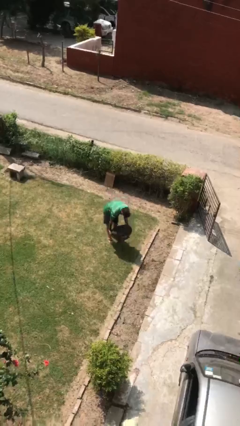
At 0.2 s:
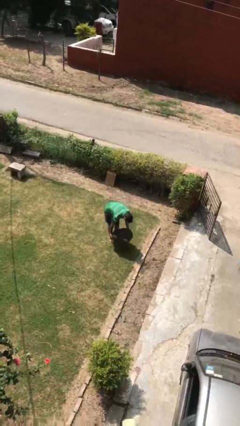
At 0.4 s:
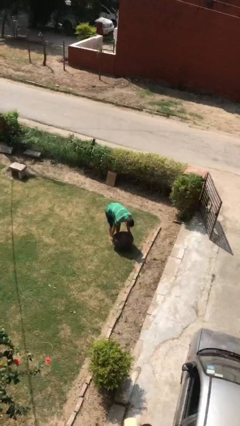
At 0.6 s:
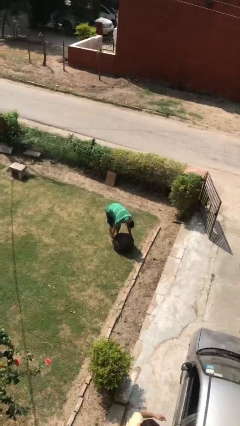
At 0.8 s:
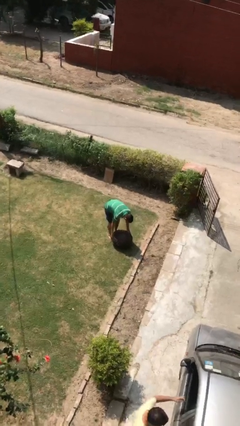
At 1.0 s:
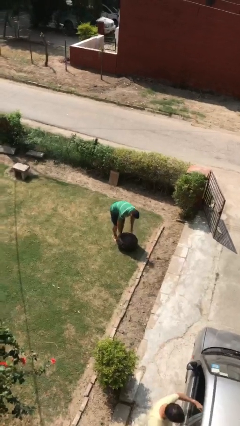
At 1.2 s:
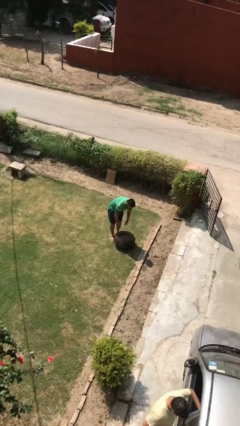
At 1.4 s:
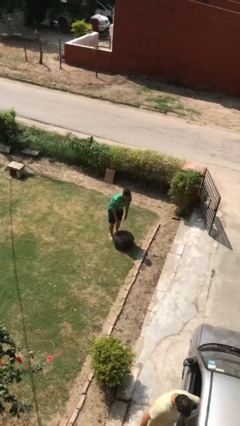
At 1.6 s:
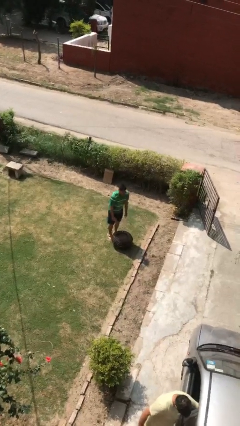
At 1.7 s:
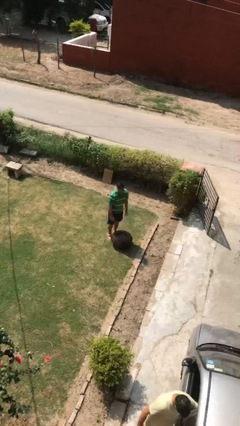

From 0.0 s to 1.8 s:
person puts down object on floor

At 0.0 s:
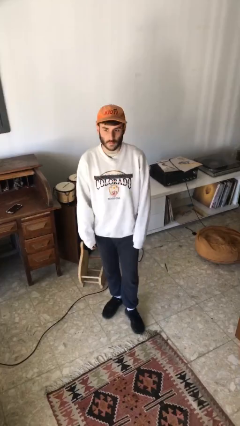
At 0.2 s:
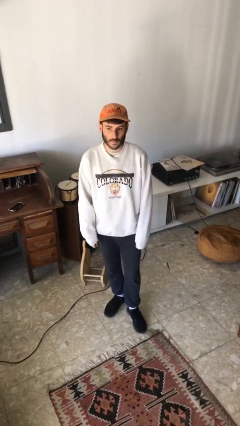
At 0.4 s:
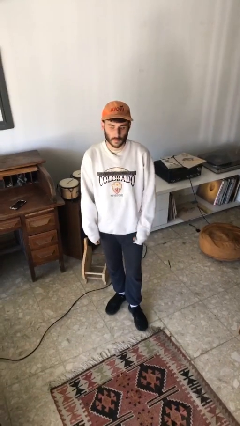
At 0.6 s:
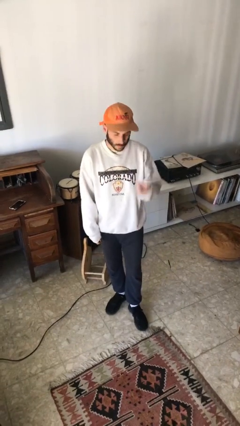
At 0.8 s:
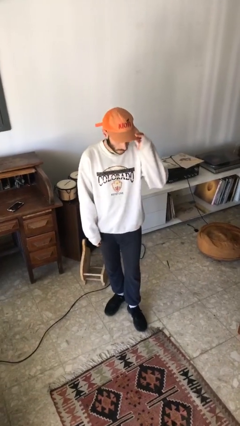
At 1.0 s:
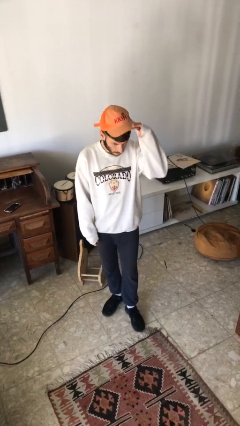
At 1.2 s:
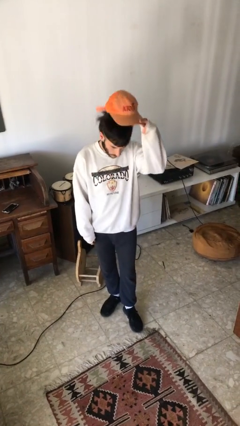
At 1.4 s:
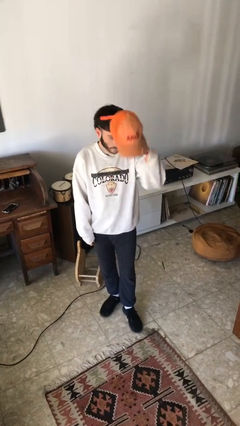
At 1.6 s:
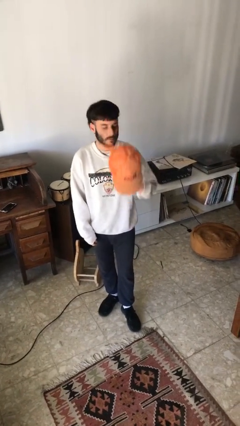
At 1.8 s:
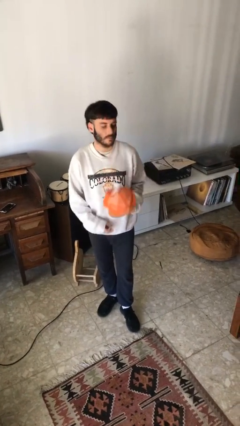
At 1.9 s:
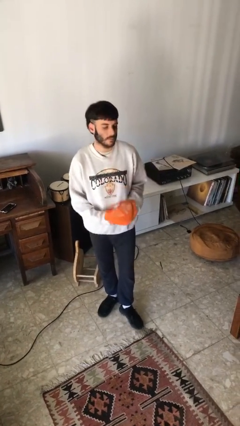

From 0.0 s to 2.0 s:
person takes off hat

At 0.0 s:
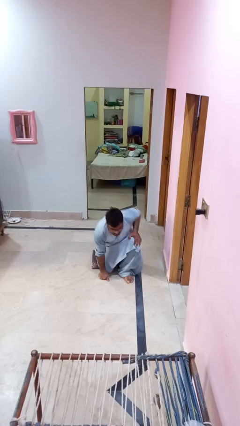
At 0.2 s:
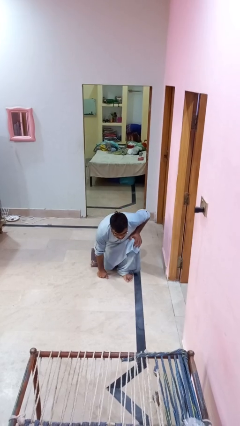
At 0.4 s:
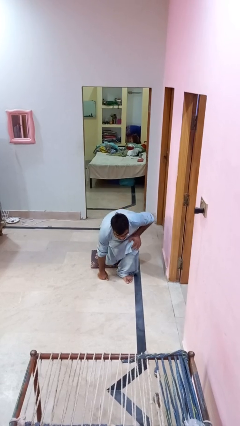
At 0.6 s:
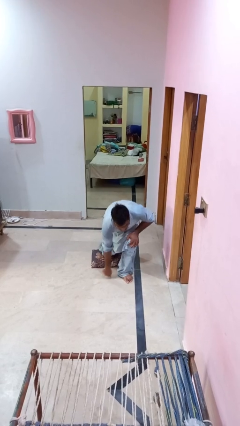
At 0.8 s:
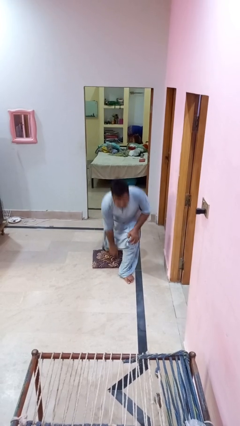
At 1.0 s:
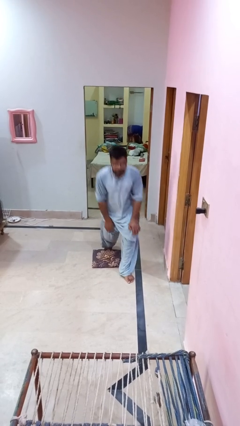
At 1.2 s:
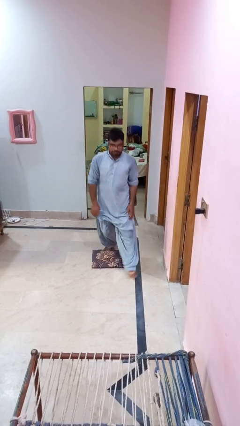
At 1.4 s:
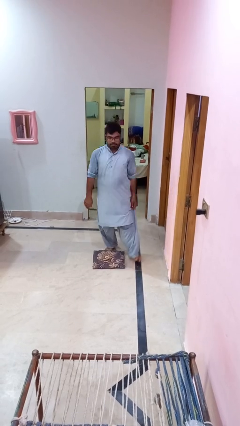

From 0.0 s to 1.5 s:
person stands up from floor

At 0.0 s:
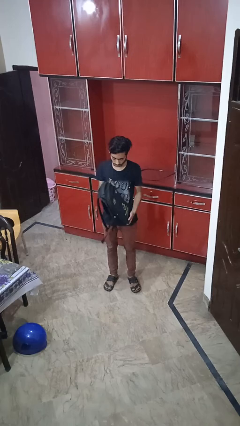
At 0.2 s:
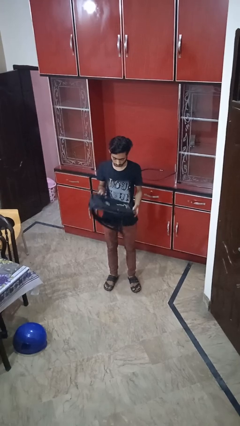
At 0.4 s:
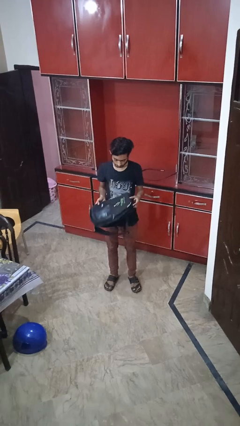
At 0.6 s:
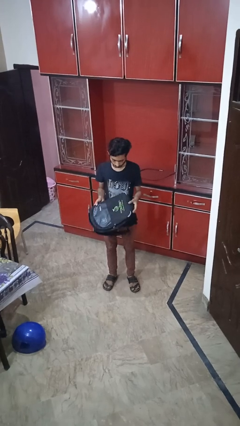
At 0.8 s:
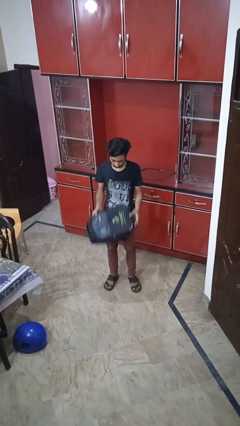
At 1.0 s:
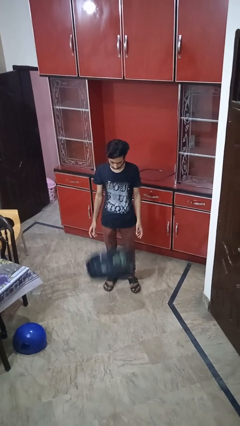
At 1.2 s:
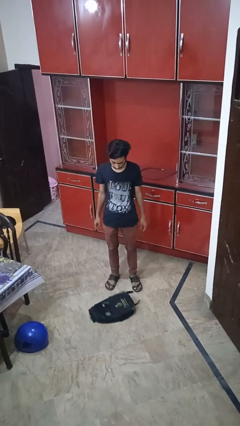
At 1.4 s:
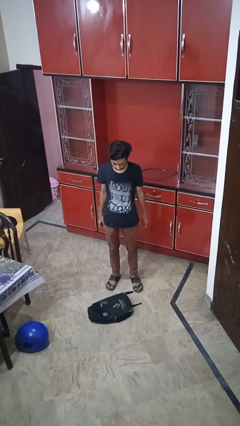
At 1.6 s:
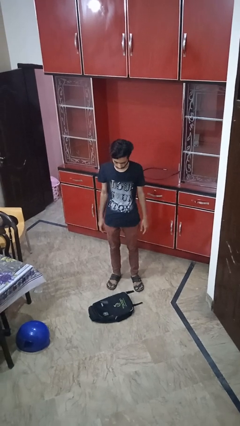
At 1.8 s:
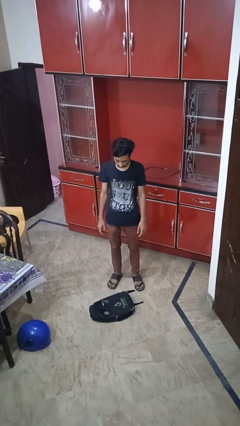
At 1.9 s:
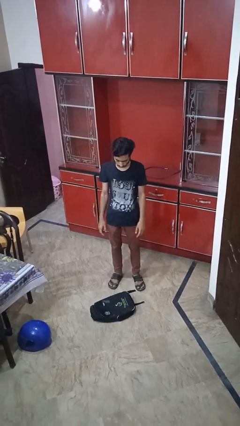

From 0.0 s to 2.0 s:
person drops object

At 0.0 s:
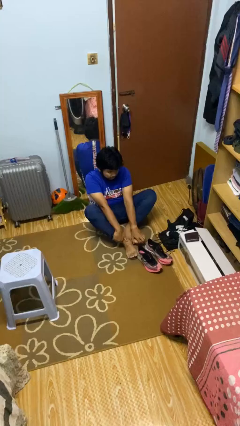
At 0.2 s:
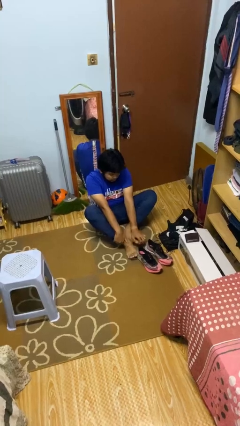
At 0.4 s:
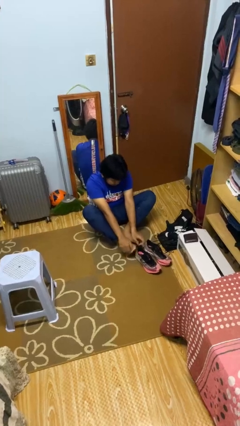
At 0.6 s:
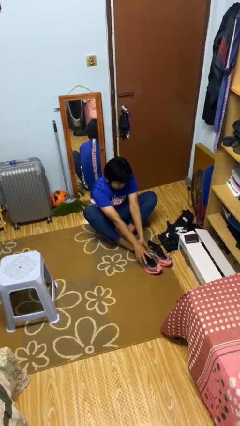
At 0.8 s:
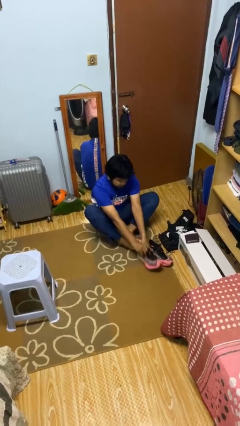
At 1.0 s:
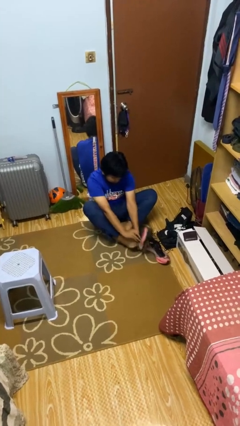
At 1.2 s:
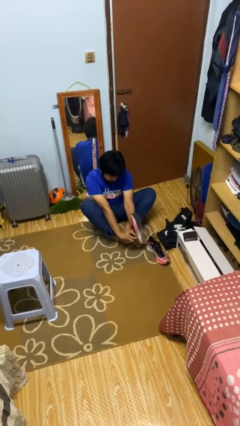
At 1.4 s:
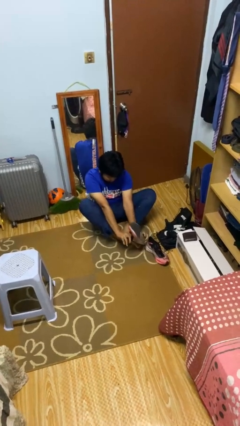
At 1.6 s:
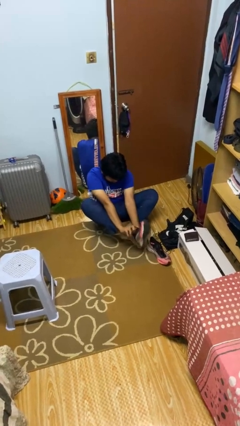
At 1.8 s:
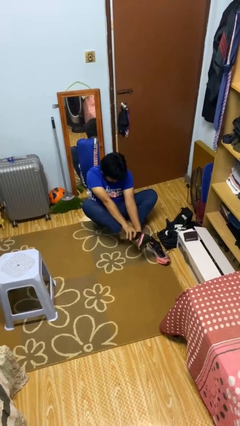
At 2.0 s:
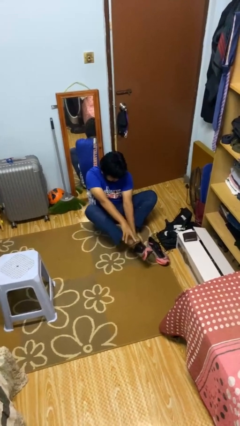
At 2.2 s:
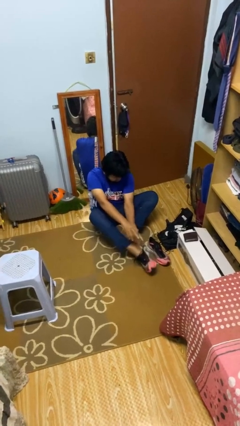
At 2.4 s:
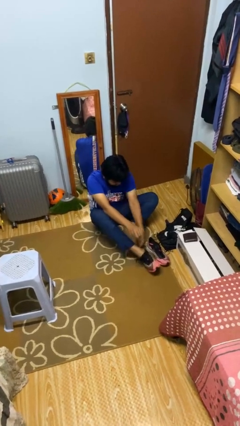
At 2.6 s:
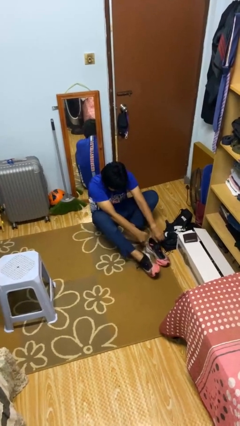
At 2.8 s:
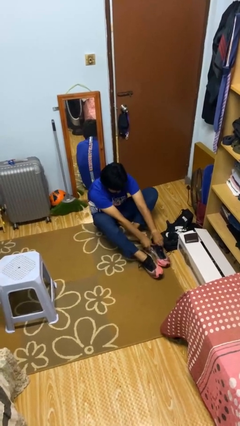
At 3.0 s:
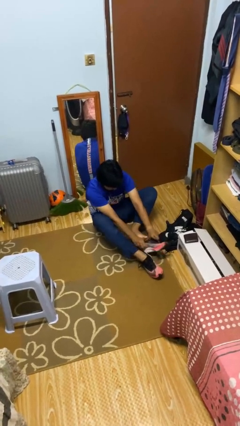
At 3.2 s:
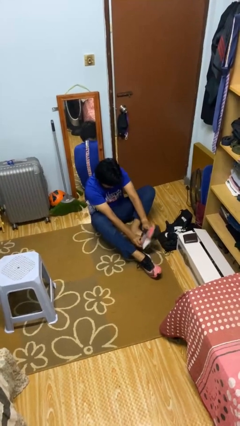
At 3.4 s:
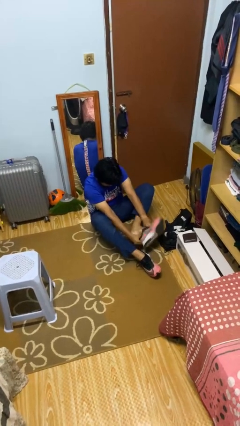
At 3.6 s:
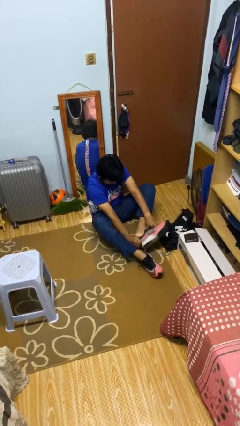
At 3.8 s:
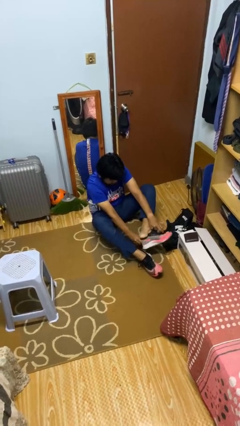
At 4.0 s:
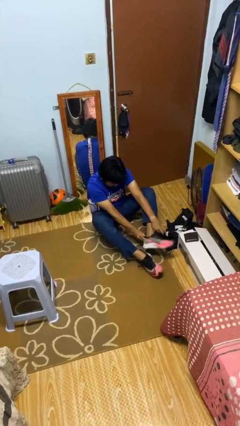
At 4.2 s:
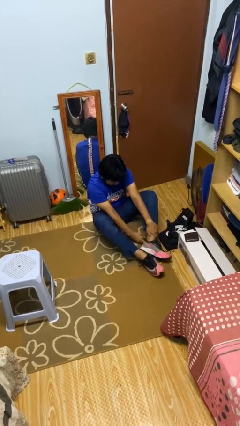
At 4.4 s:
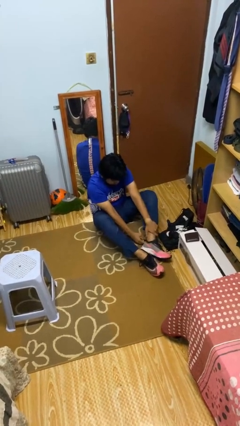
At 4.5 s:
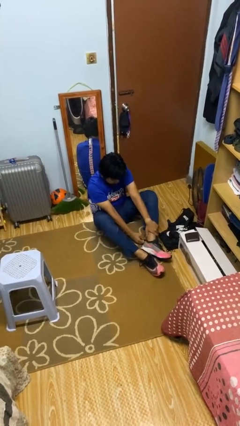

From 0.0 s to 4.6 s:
person puts on shoes

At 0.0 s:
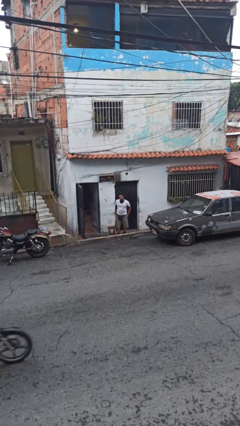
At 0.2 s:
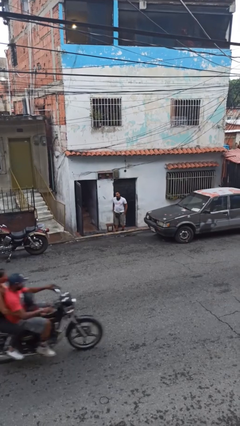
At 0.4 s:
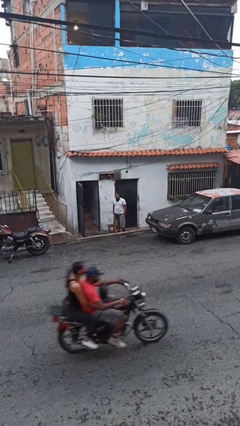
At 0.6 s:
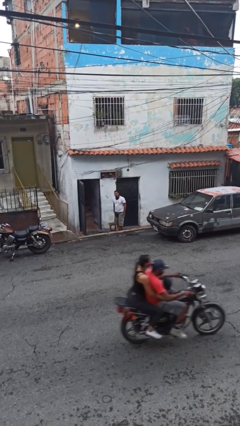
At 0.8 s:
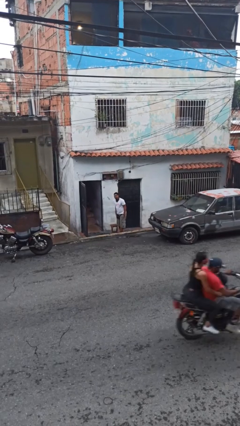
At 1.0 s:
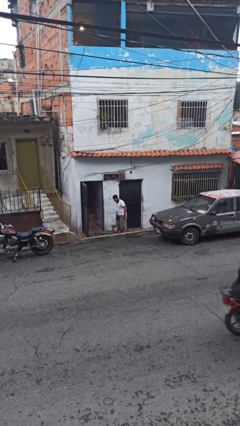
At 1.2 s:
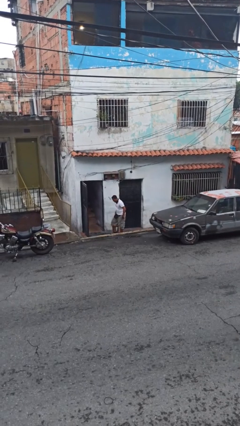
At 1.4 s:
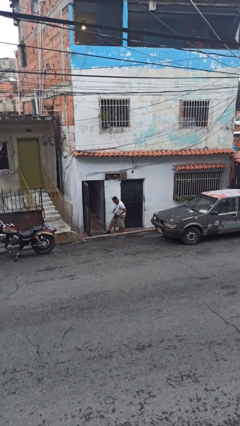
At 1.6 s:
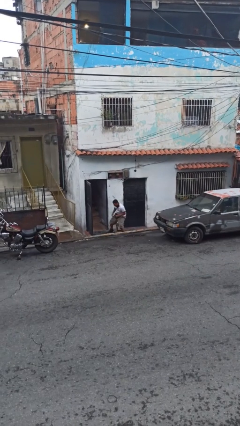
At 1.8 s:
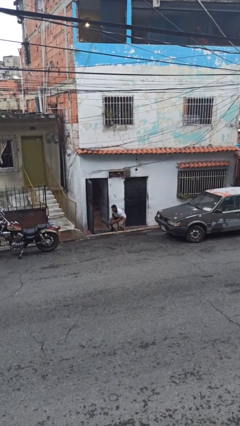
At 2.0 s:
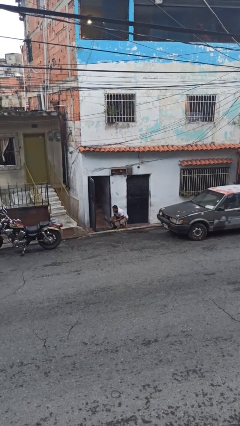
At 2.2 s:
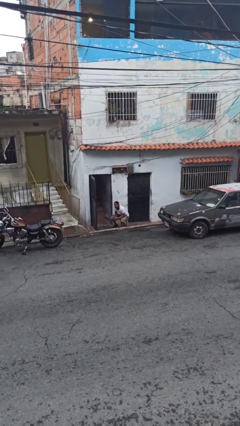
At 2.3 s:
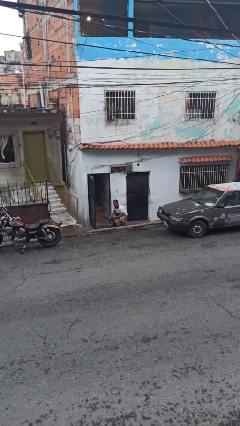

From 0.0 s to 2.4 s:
person sits down

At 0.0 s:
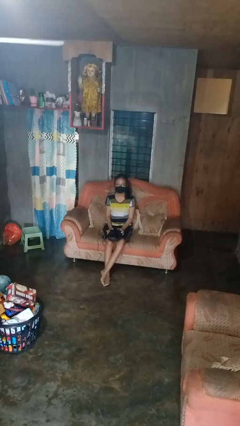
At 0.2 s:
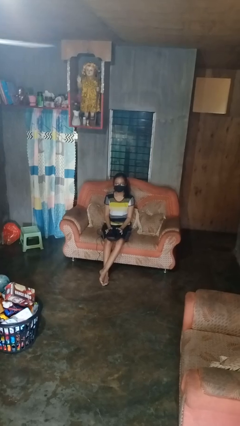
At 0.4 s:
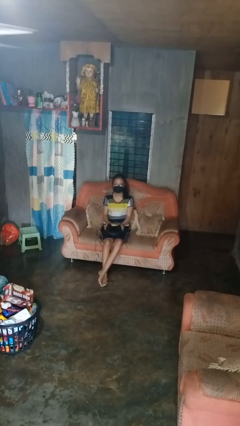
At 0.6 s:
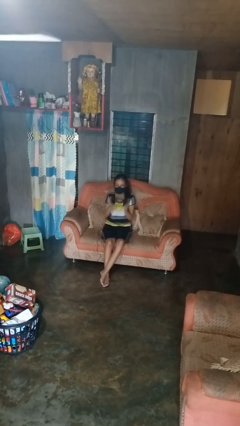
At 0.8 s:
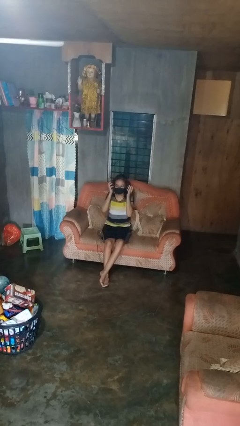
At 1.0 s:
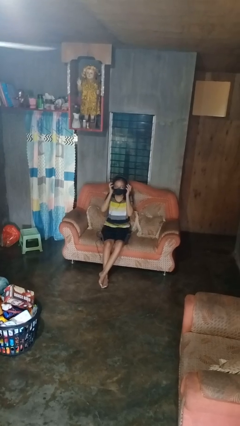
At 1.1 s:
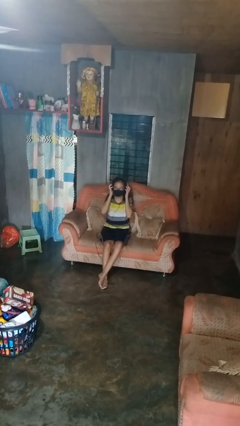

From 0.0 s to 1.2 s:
person puts on headphones

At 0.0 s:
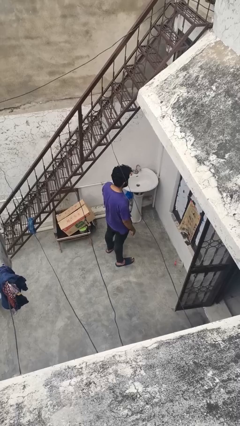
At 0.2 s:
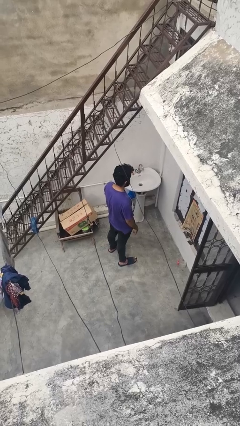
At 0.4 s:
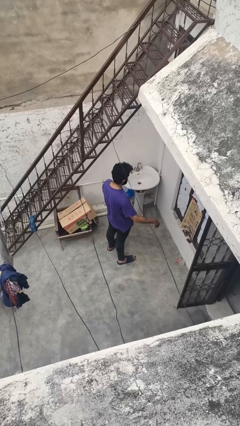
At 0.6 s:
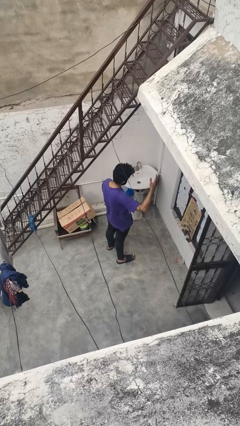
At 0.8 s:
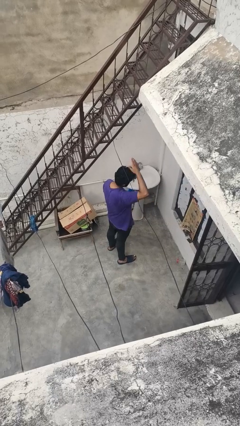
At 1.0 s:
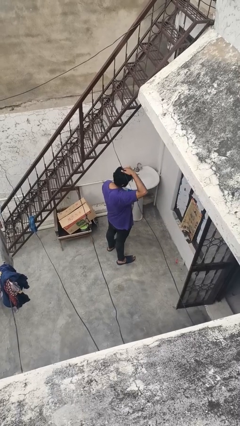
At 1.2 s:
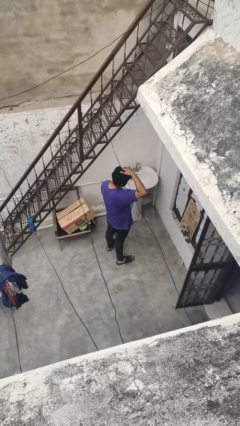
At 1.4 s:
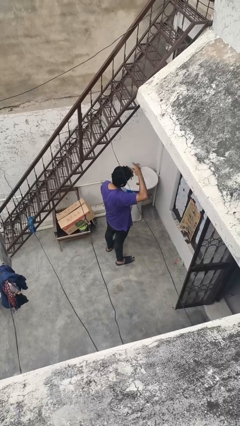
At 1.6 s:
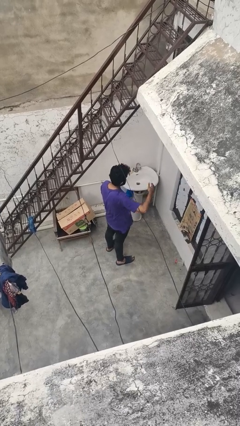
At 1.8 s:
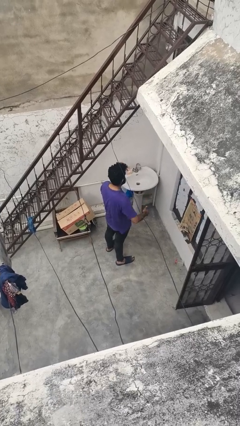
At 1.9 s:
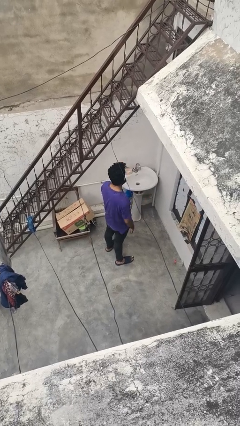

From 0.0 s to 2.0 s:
person pats head
